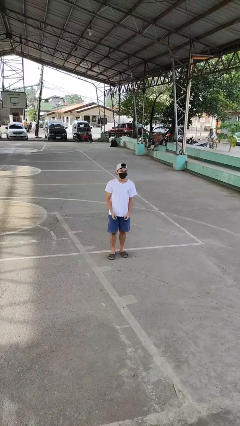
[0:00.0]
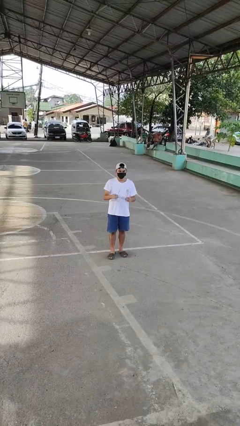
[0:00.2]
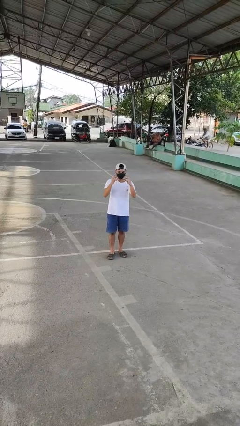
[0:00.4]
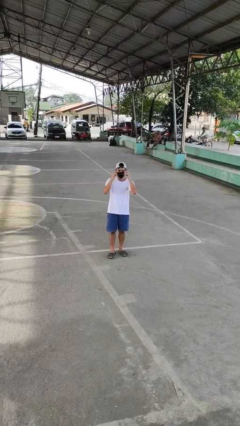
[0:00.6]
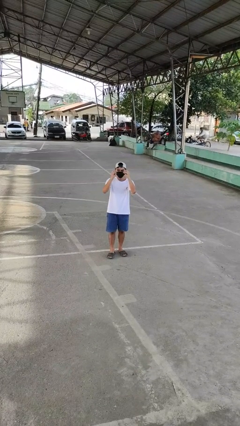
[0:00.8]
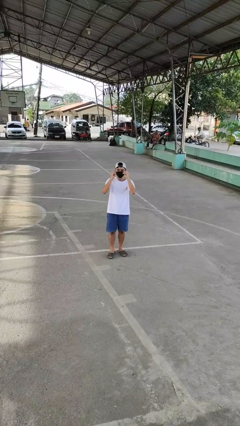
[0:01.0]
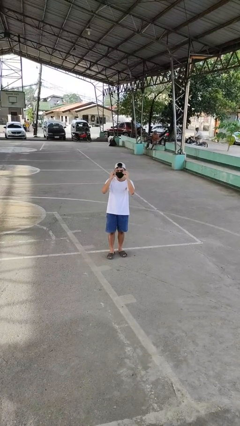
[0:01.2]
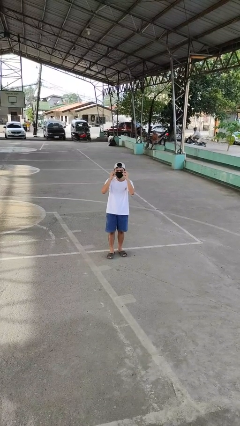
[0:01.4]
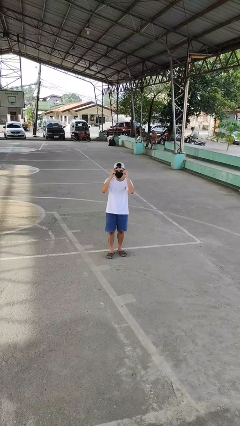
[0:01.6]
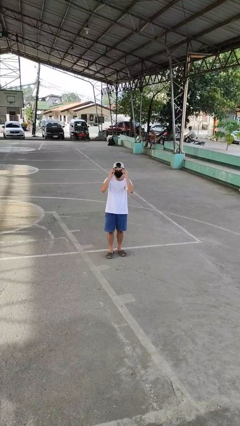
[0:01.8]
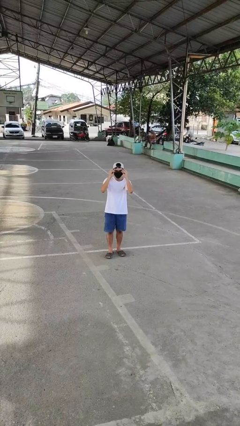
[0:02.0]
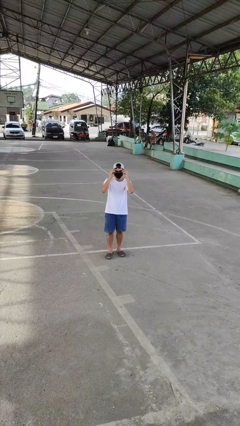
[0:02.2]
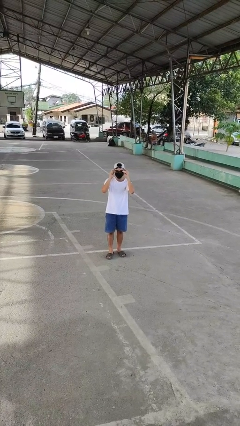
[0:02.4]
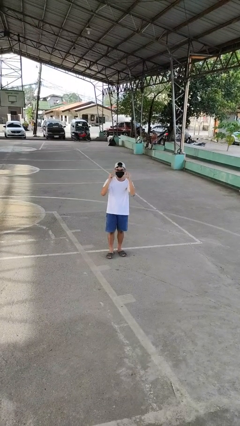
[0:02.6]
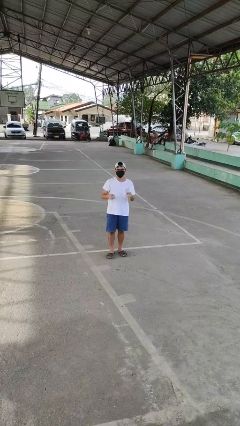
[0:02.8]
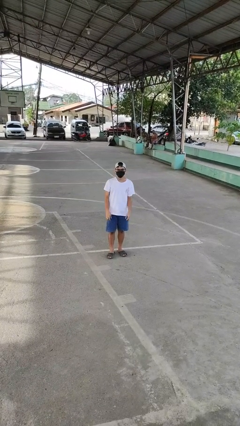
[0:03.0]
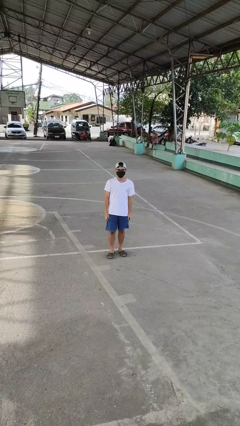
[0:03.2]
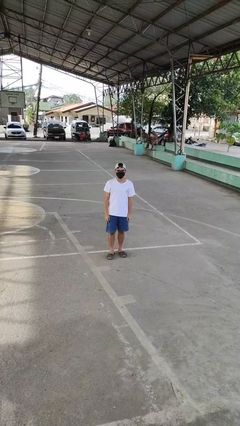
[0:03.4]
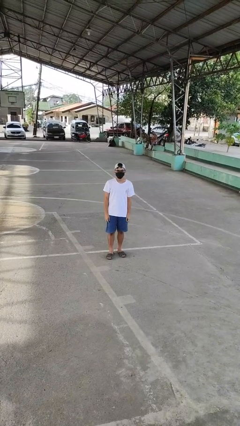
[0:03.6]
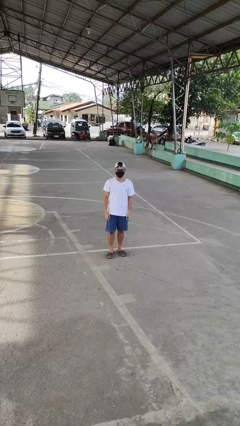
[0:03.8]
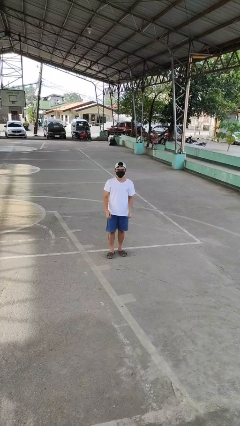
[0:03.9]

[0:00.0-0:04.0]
person puts on glasses

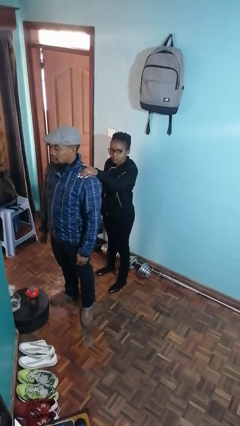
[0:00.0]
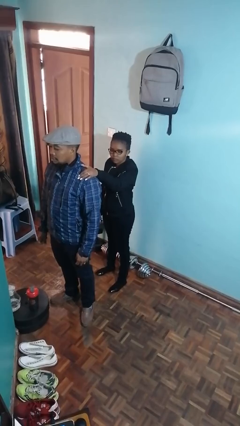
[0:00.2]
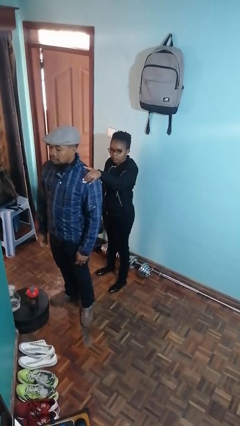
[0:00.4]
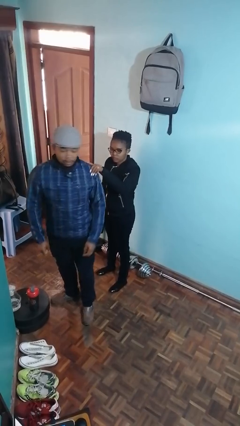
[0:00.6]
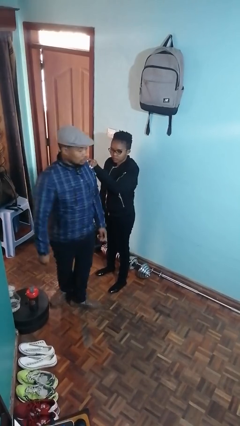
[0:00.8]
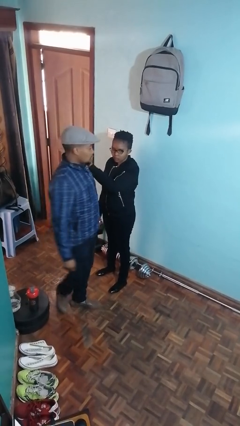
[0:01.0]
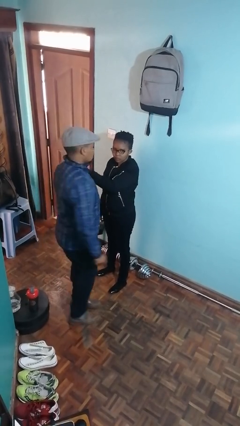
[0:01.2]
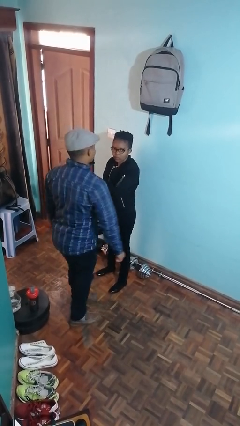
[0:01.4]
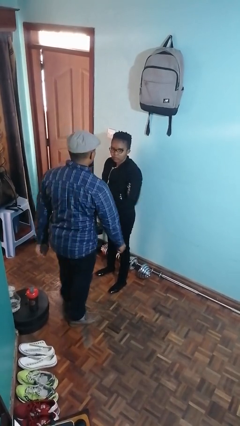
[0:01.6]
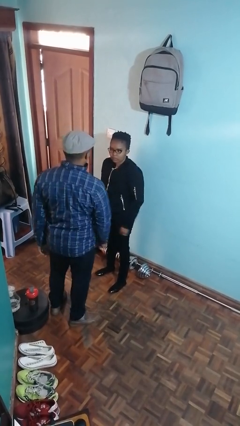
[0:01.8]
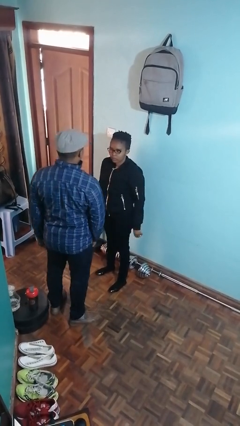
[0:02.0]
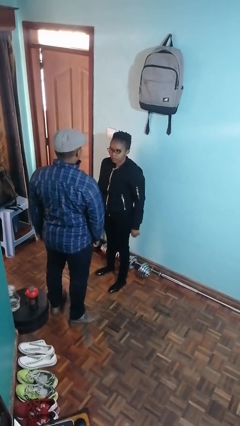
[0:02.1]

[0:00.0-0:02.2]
person spins person around

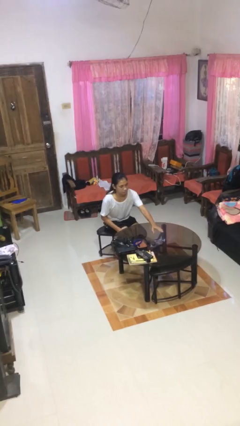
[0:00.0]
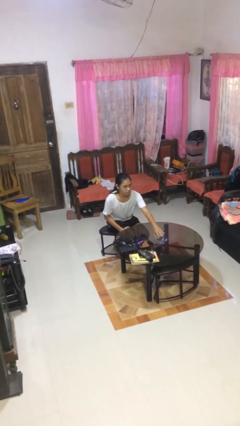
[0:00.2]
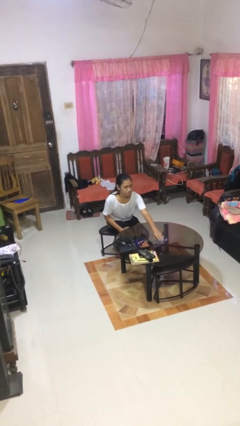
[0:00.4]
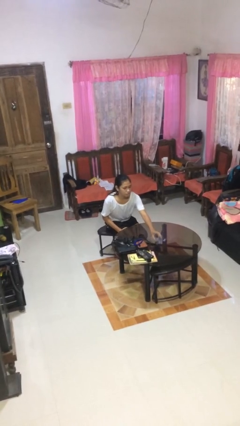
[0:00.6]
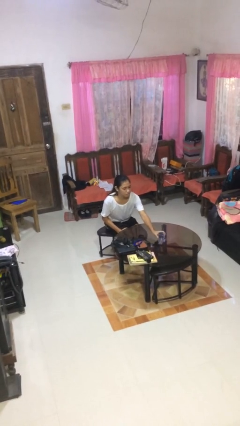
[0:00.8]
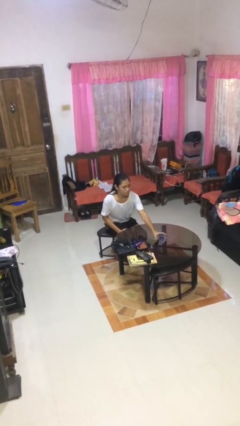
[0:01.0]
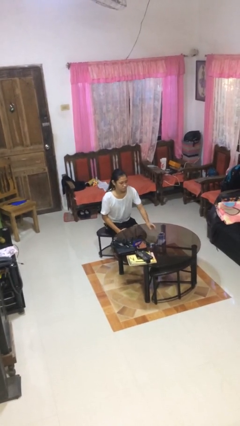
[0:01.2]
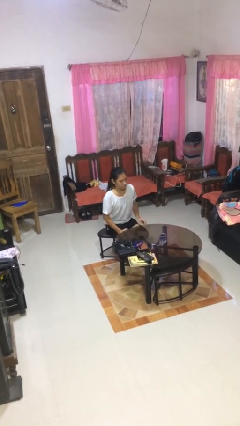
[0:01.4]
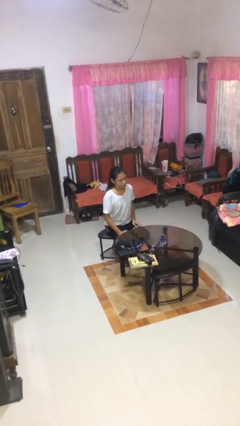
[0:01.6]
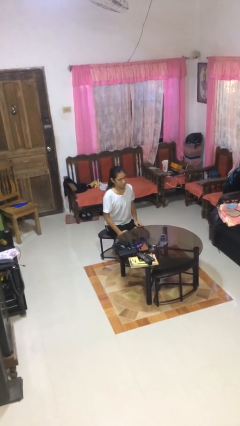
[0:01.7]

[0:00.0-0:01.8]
person sets upright glass

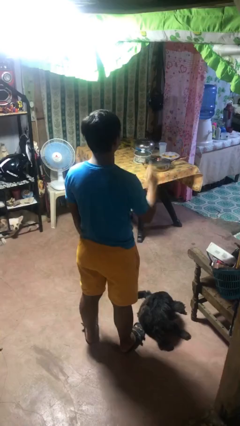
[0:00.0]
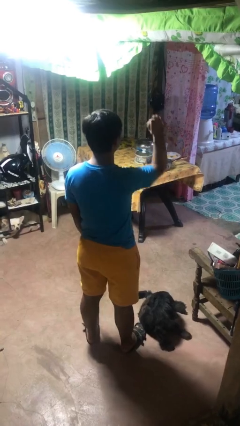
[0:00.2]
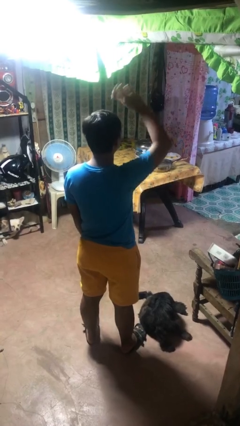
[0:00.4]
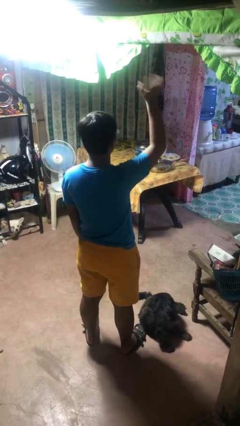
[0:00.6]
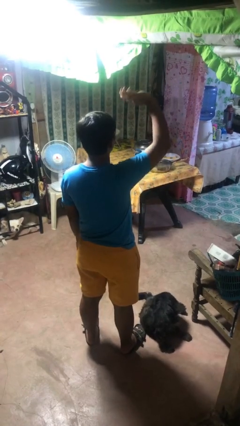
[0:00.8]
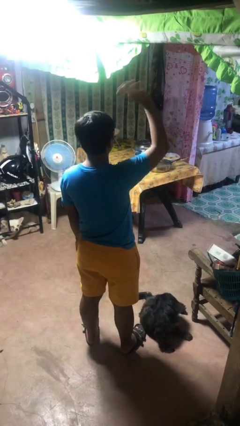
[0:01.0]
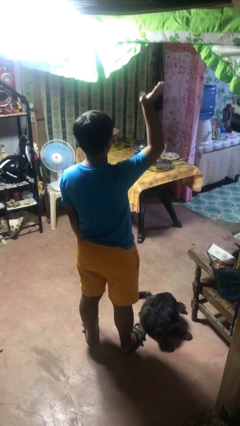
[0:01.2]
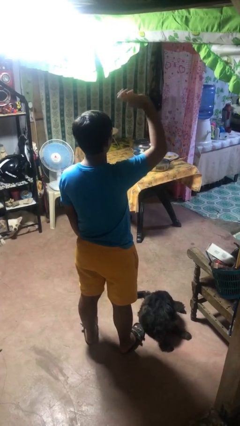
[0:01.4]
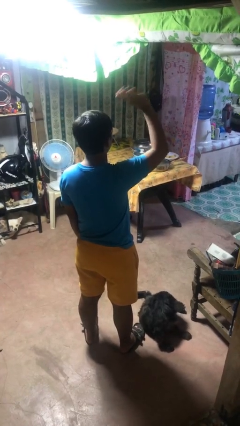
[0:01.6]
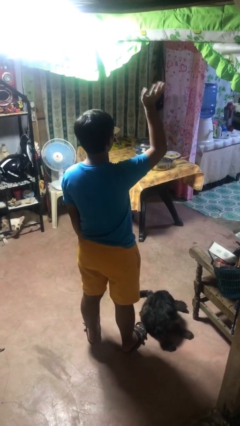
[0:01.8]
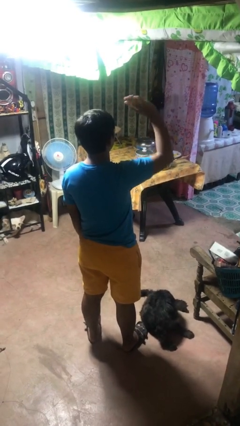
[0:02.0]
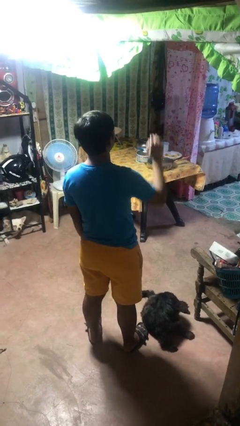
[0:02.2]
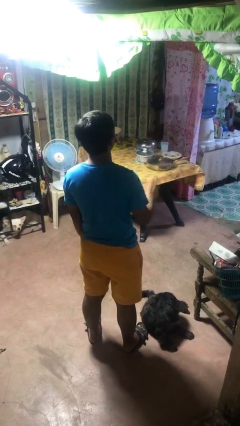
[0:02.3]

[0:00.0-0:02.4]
person waves at person

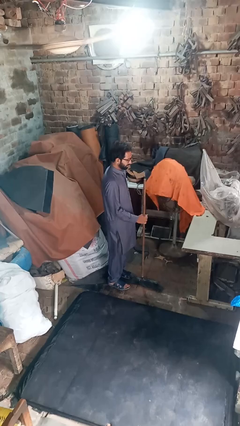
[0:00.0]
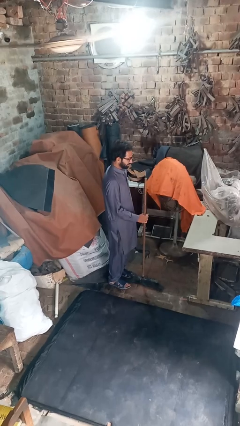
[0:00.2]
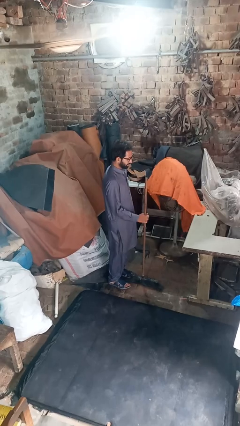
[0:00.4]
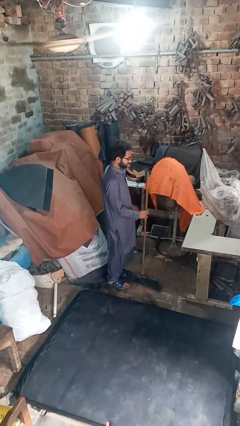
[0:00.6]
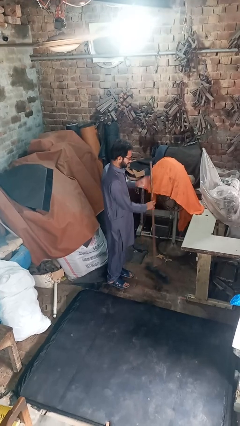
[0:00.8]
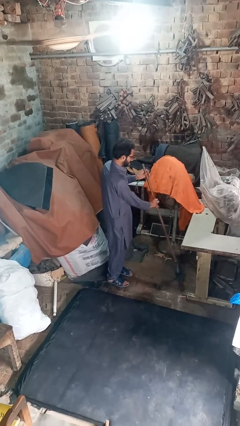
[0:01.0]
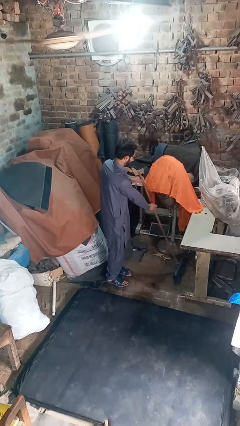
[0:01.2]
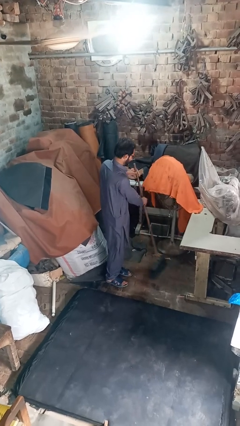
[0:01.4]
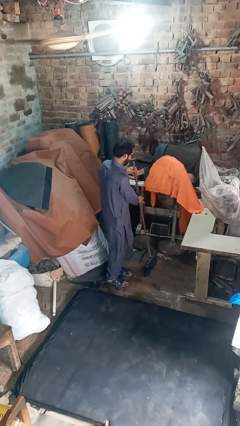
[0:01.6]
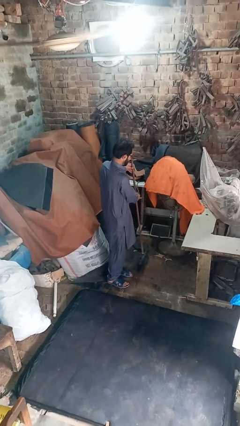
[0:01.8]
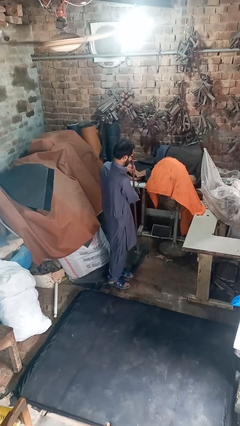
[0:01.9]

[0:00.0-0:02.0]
person sweeps floor

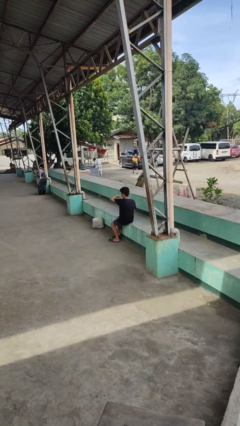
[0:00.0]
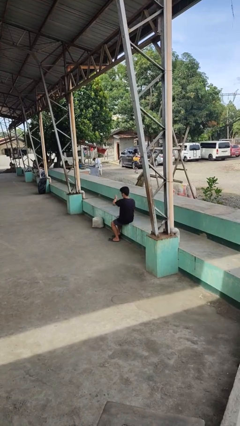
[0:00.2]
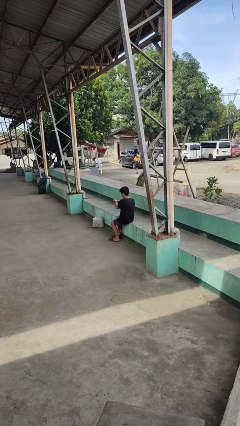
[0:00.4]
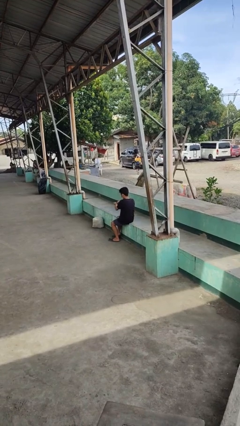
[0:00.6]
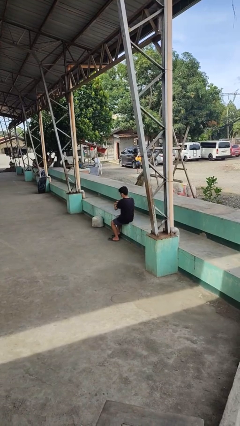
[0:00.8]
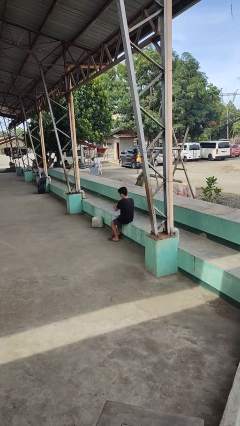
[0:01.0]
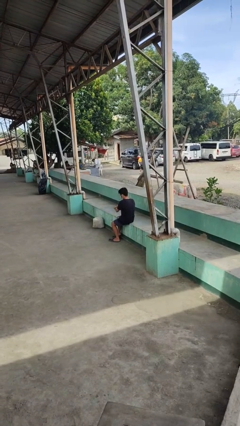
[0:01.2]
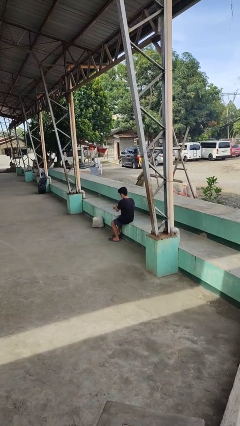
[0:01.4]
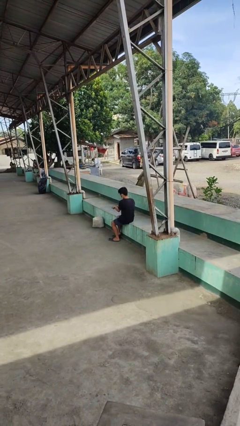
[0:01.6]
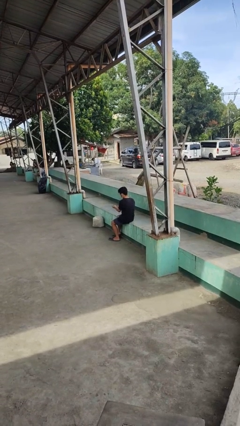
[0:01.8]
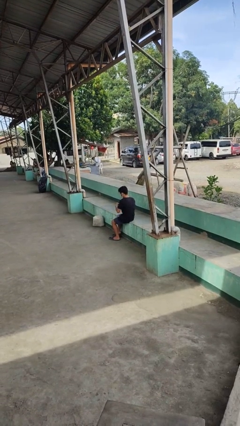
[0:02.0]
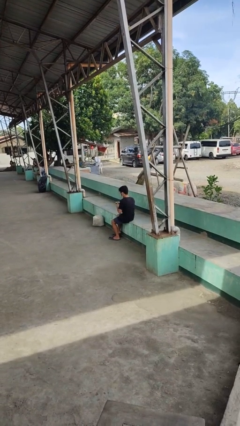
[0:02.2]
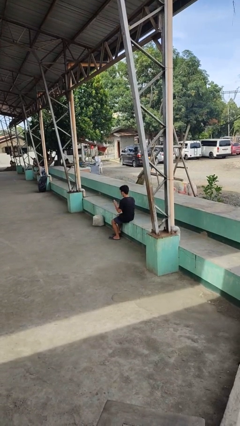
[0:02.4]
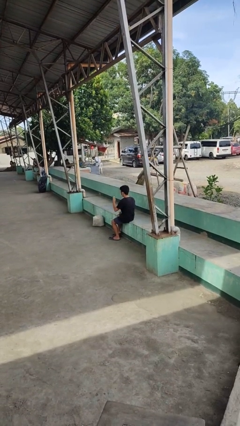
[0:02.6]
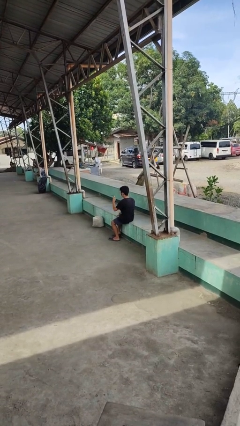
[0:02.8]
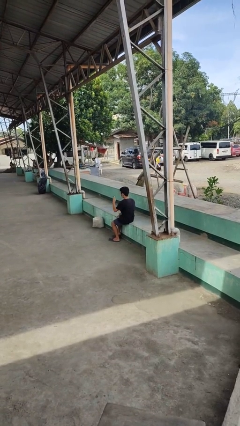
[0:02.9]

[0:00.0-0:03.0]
person takes off wristwatch

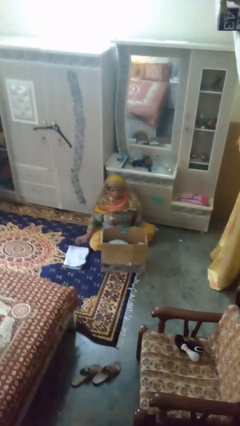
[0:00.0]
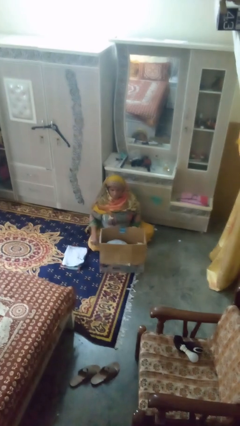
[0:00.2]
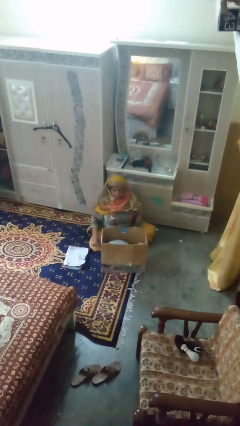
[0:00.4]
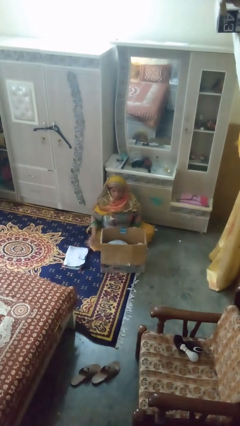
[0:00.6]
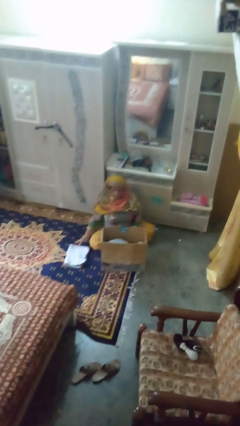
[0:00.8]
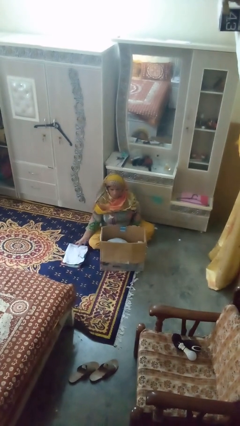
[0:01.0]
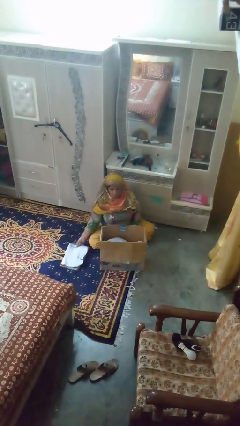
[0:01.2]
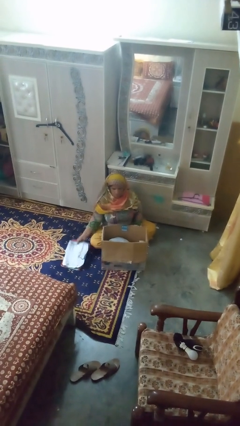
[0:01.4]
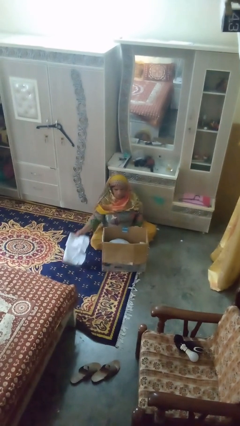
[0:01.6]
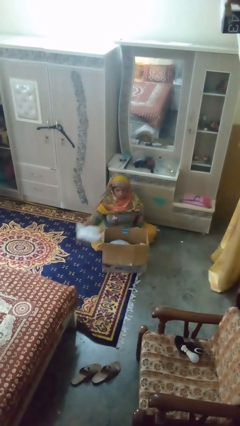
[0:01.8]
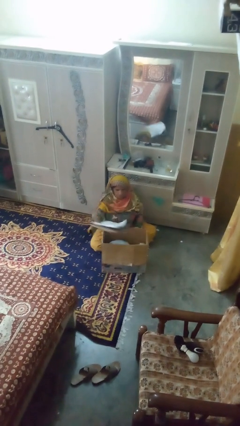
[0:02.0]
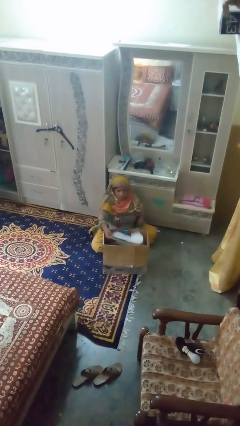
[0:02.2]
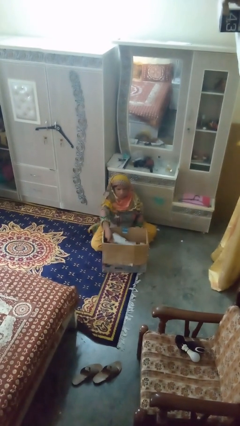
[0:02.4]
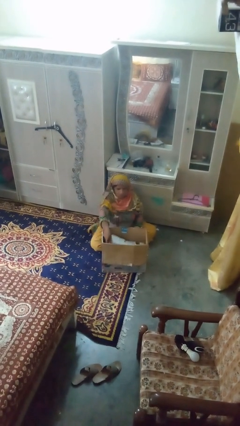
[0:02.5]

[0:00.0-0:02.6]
person puts object into box
